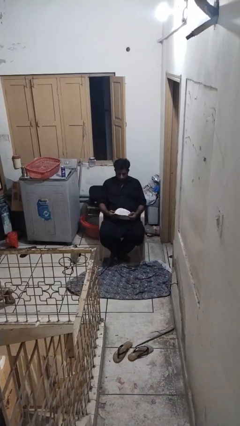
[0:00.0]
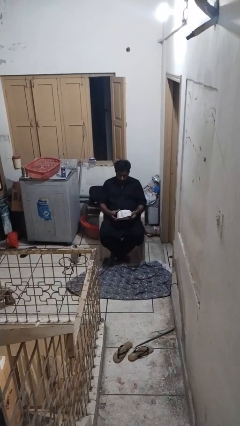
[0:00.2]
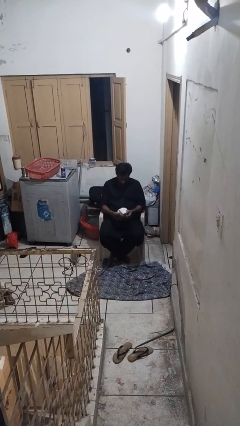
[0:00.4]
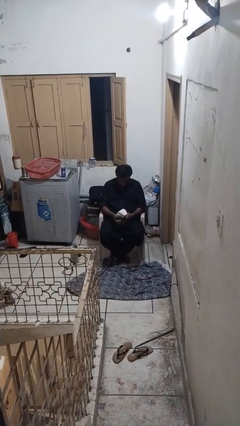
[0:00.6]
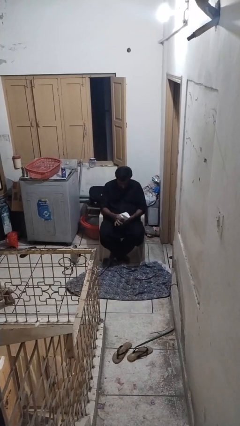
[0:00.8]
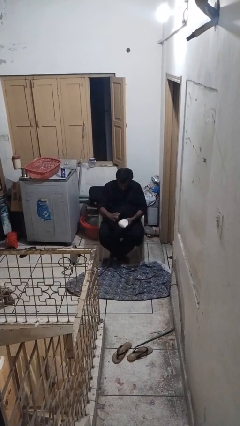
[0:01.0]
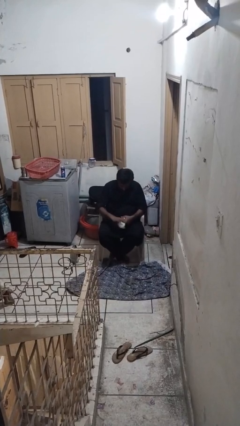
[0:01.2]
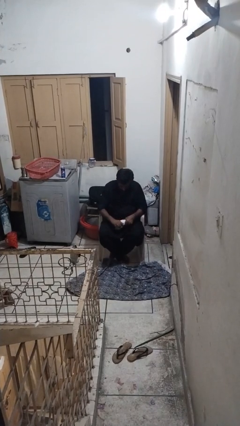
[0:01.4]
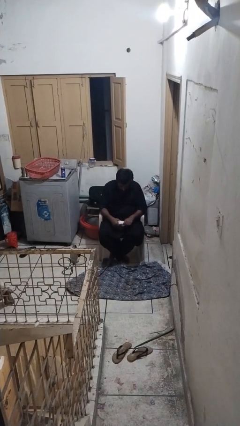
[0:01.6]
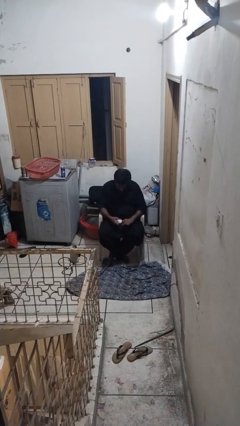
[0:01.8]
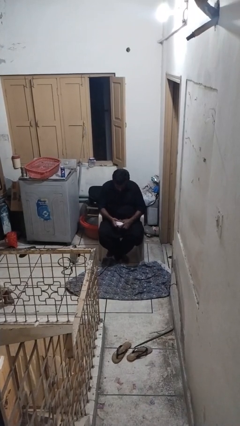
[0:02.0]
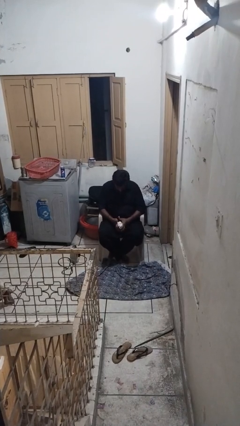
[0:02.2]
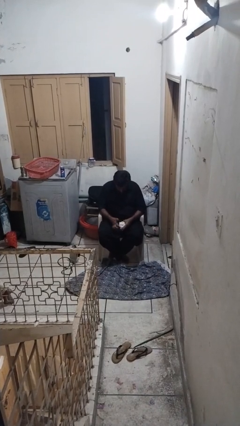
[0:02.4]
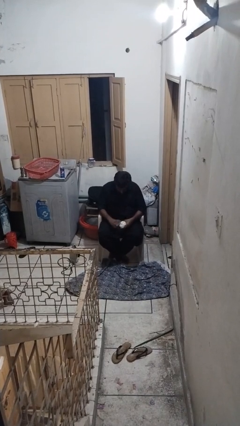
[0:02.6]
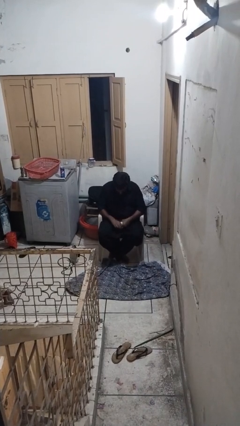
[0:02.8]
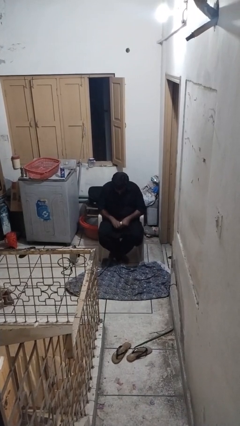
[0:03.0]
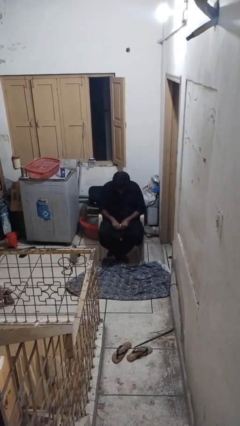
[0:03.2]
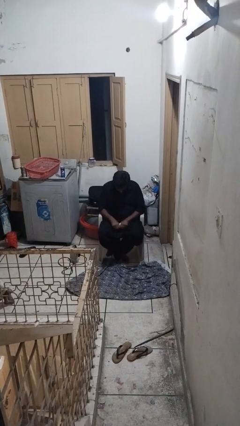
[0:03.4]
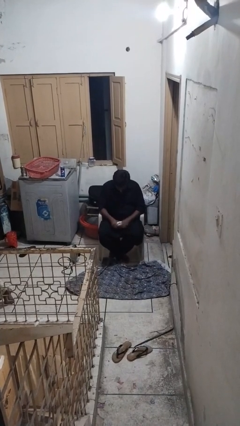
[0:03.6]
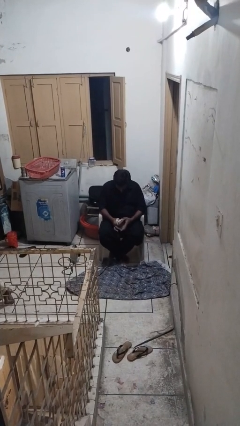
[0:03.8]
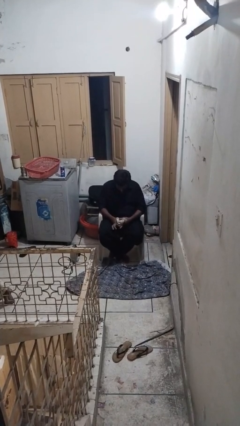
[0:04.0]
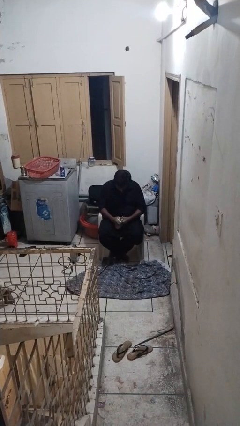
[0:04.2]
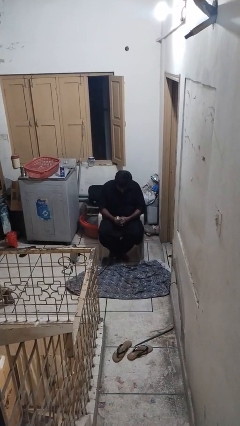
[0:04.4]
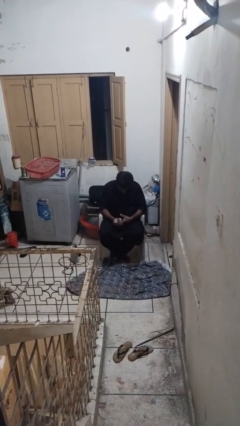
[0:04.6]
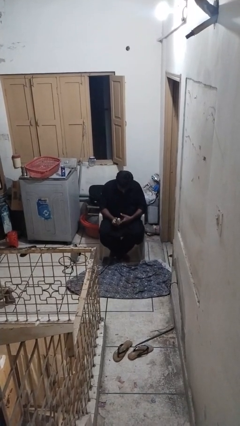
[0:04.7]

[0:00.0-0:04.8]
person squeezes object

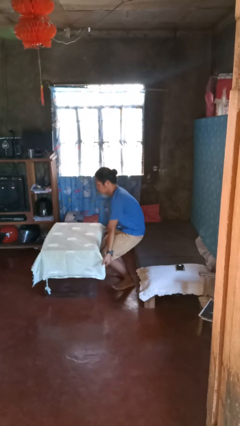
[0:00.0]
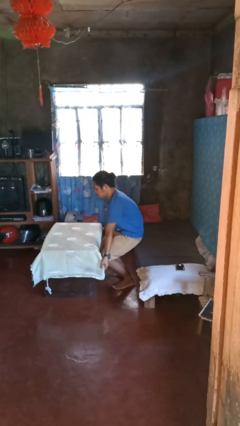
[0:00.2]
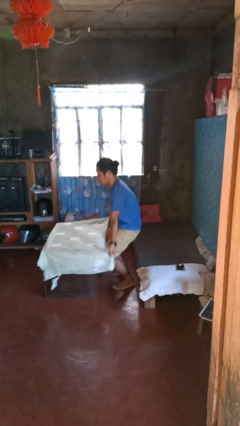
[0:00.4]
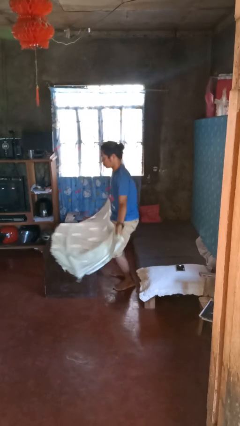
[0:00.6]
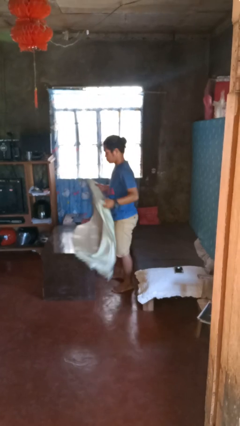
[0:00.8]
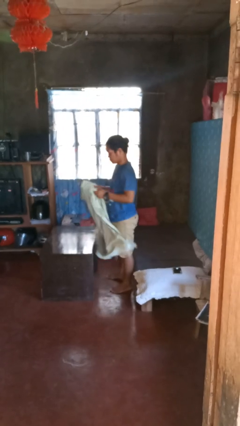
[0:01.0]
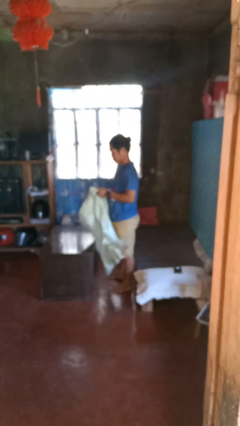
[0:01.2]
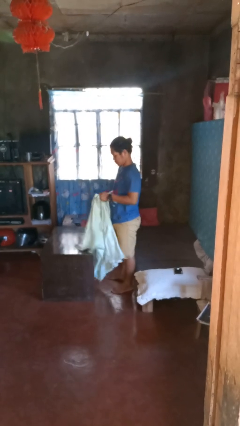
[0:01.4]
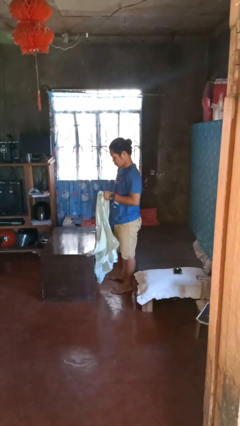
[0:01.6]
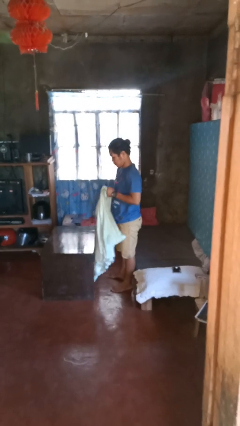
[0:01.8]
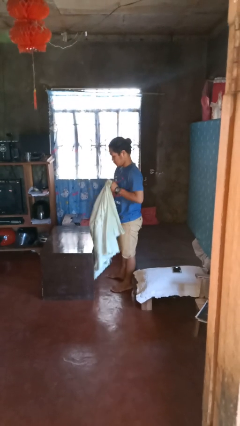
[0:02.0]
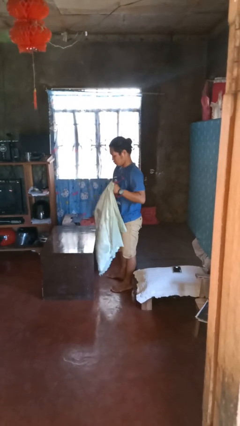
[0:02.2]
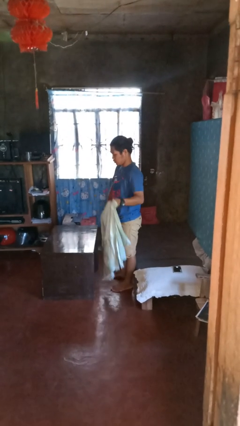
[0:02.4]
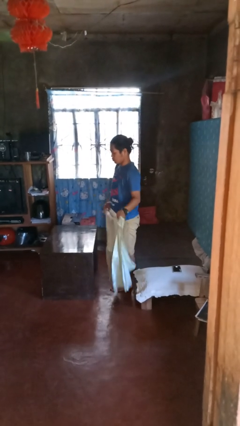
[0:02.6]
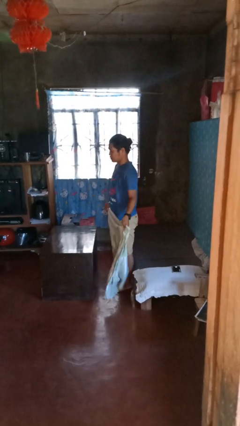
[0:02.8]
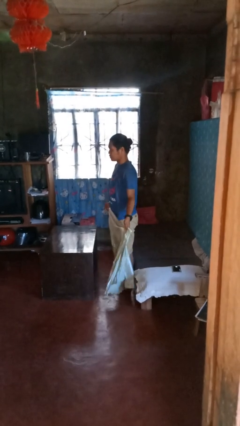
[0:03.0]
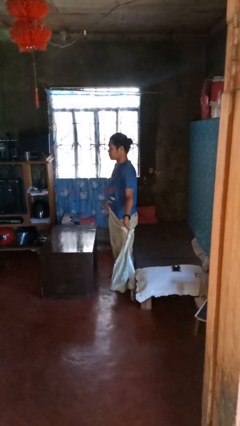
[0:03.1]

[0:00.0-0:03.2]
person folds tablecloth

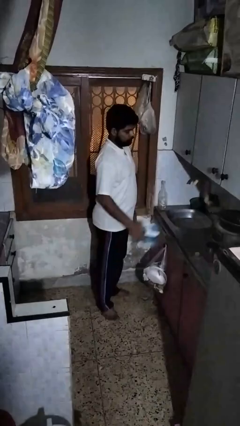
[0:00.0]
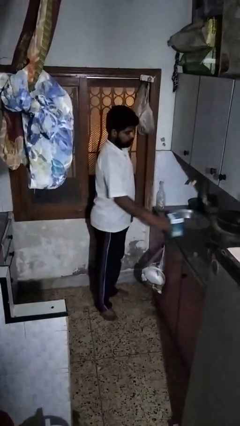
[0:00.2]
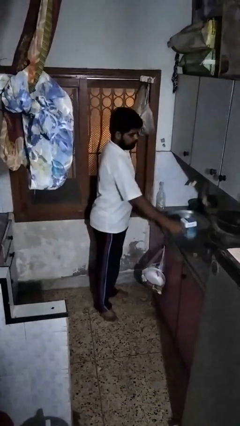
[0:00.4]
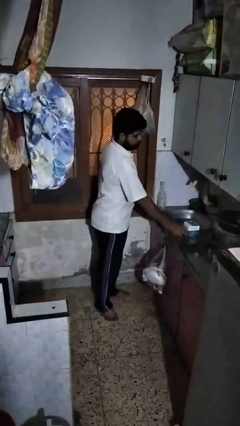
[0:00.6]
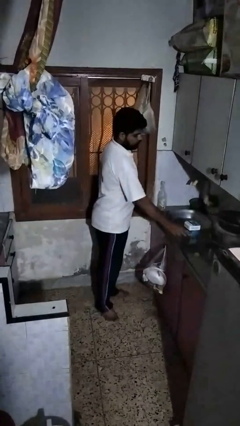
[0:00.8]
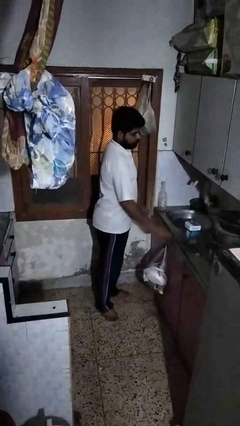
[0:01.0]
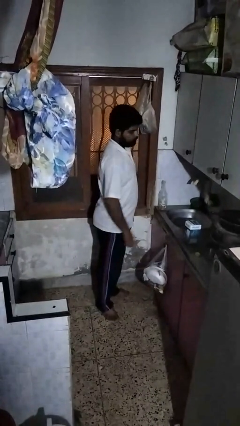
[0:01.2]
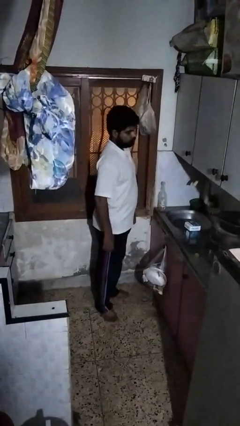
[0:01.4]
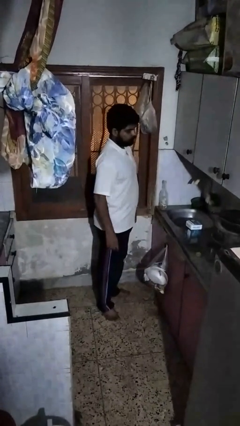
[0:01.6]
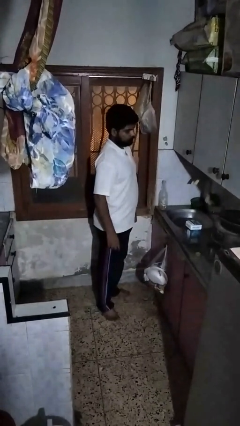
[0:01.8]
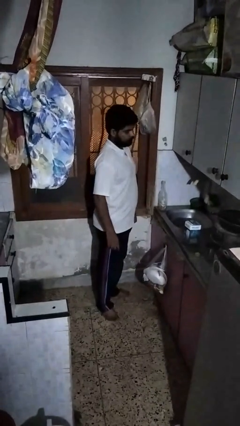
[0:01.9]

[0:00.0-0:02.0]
person puts down object on countertop

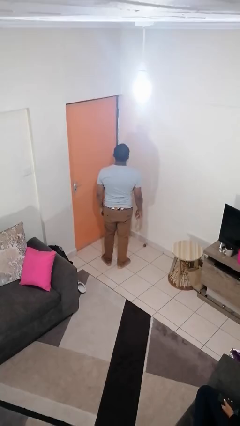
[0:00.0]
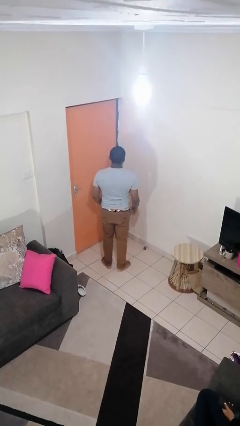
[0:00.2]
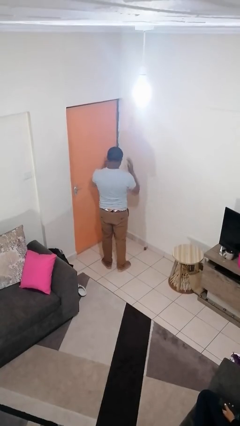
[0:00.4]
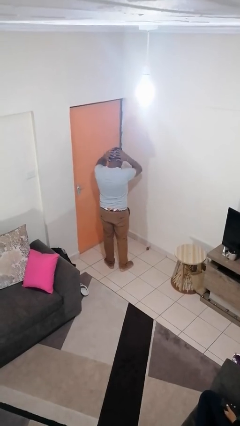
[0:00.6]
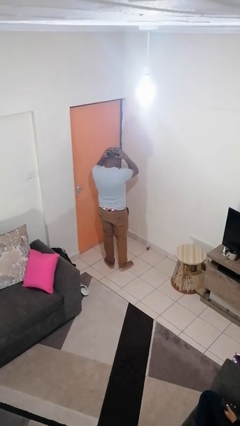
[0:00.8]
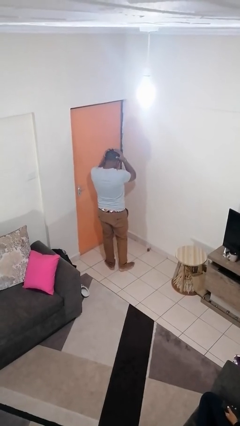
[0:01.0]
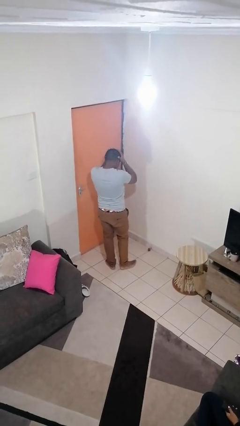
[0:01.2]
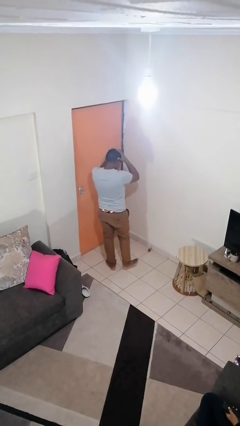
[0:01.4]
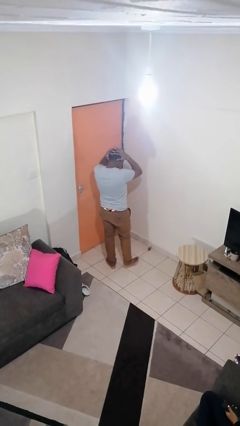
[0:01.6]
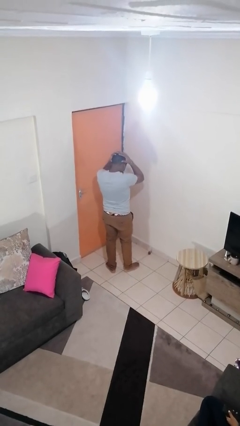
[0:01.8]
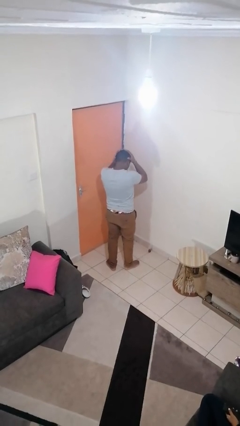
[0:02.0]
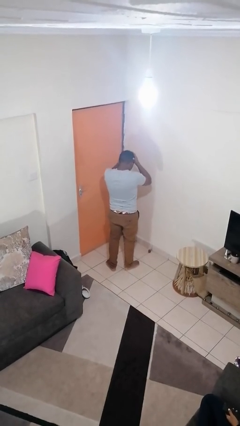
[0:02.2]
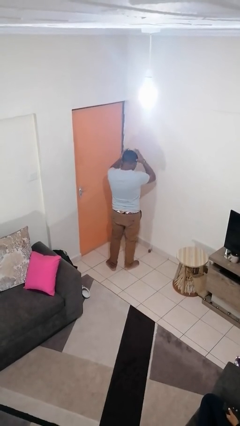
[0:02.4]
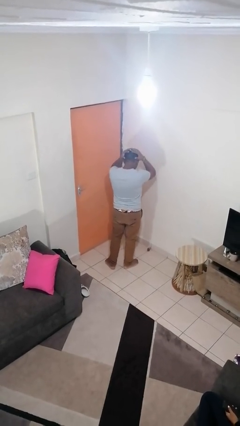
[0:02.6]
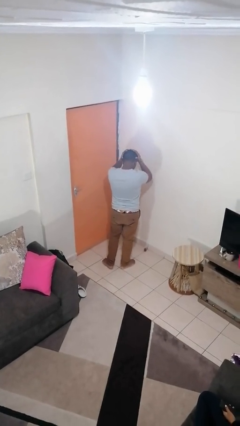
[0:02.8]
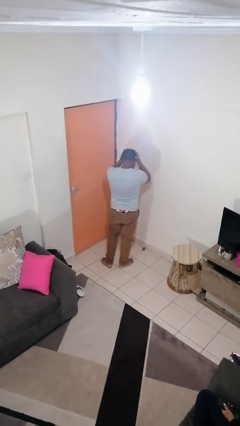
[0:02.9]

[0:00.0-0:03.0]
person strokes hair

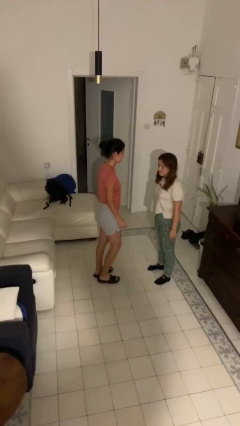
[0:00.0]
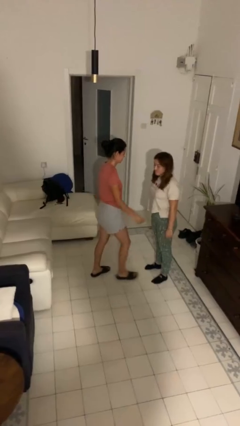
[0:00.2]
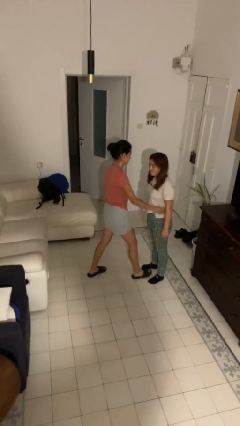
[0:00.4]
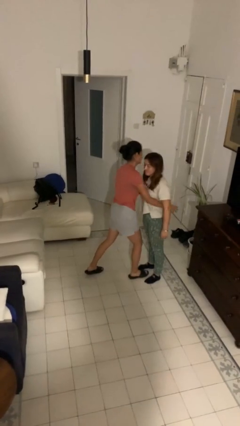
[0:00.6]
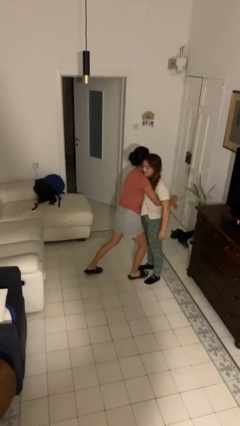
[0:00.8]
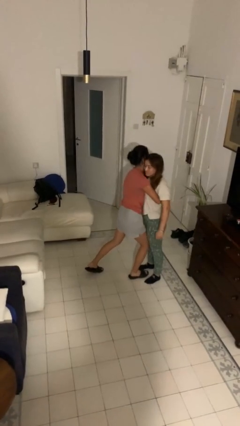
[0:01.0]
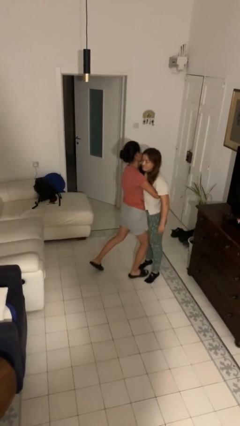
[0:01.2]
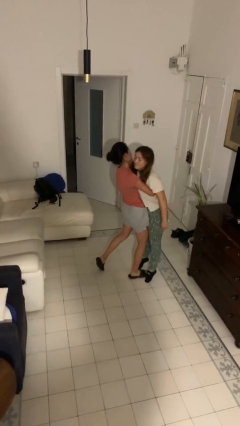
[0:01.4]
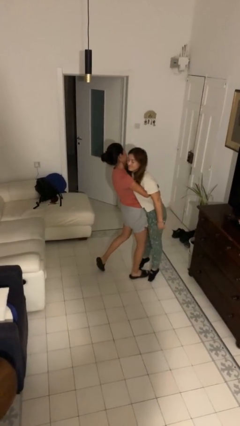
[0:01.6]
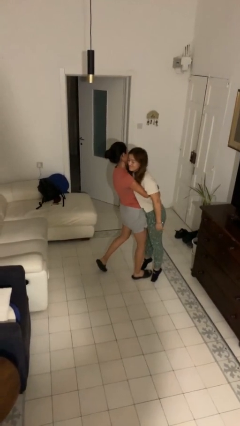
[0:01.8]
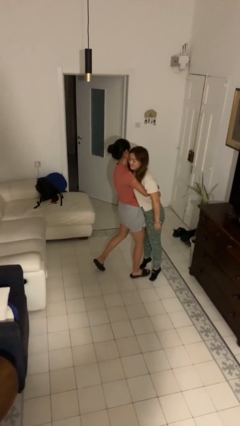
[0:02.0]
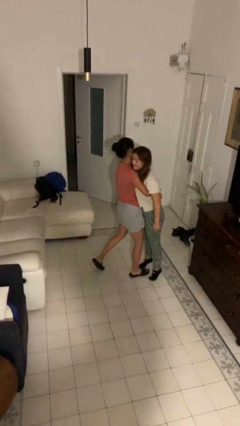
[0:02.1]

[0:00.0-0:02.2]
person picks up person

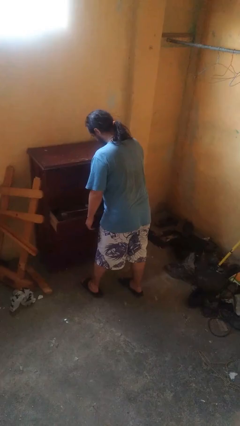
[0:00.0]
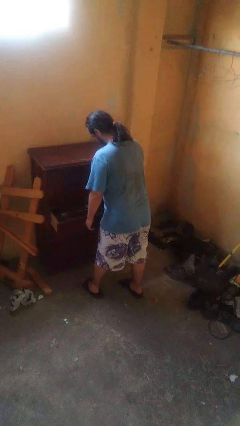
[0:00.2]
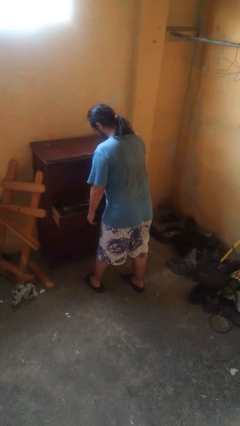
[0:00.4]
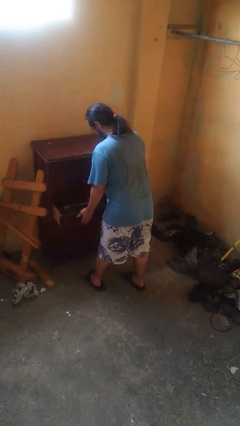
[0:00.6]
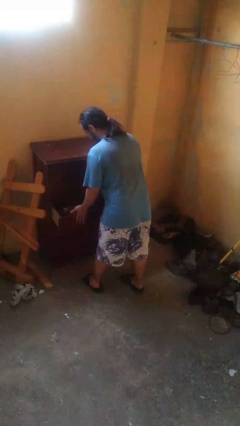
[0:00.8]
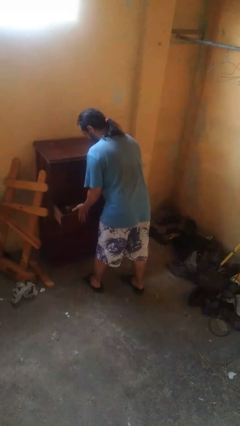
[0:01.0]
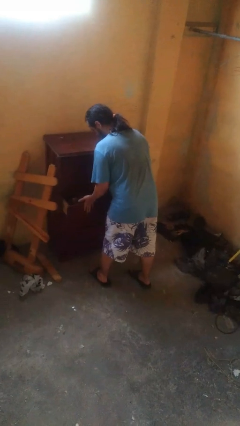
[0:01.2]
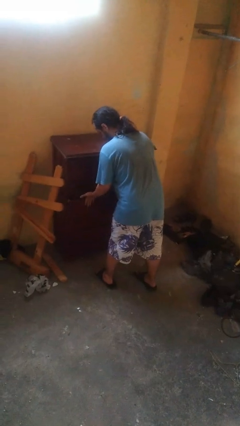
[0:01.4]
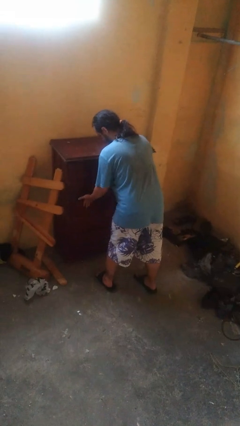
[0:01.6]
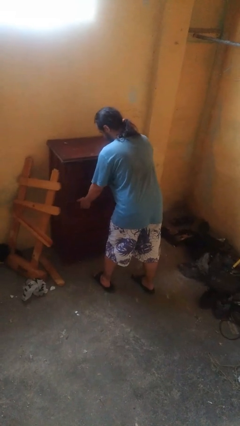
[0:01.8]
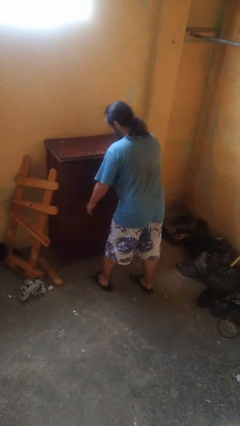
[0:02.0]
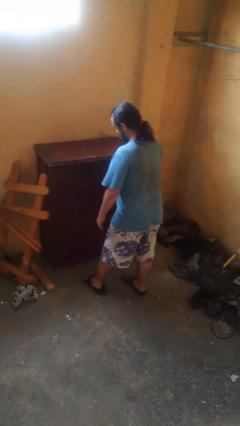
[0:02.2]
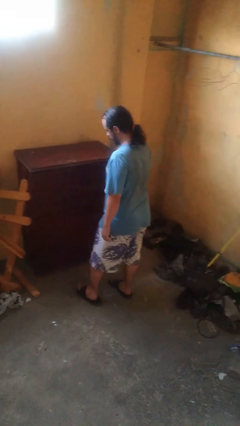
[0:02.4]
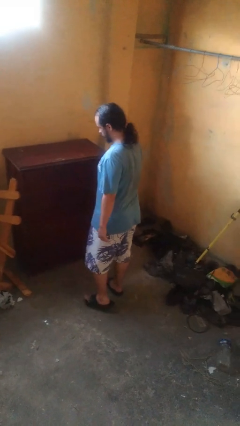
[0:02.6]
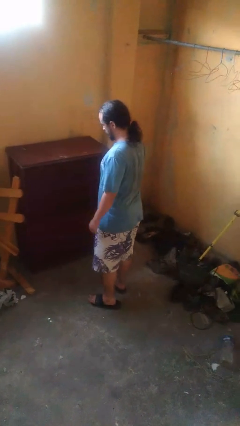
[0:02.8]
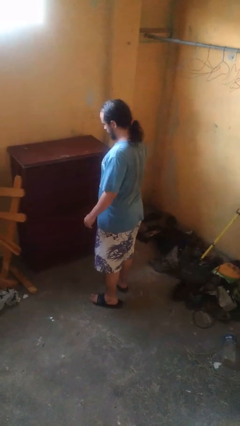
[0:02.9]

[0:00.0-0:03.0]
person closes dresser drawer
